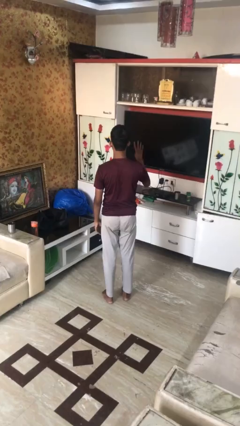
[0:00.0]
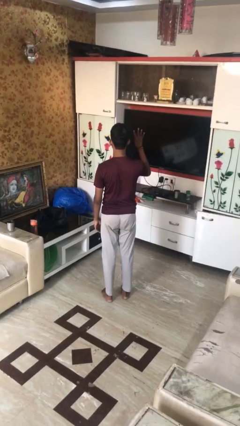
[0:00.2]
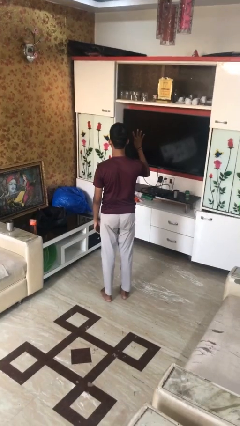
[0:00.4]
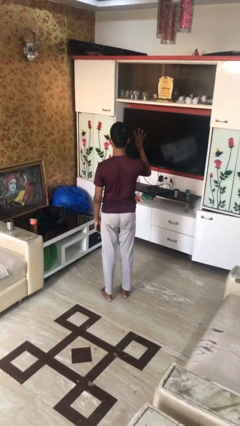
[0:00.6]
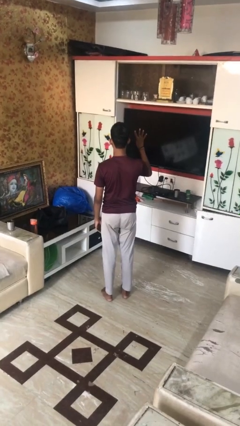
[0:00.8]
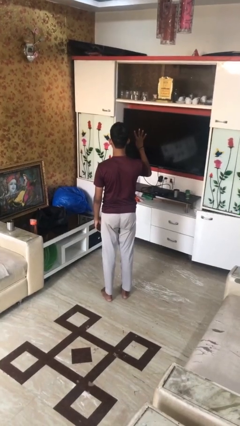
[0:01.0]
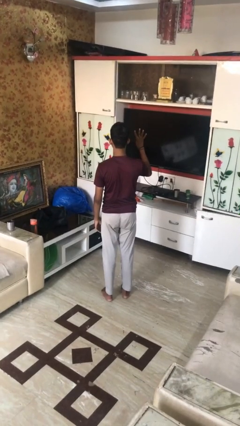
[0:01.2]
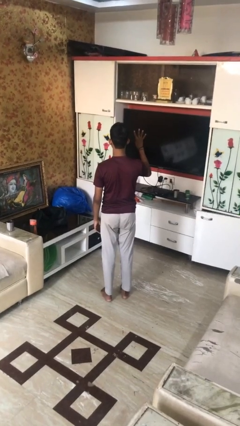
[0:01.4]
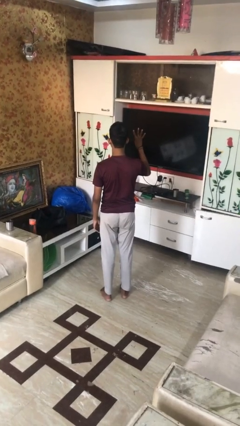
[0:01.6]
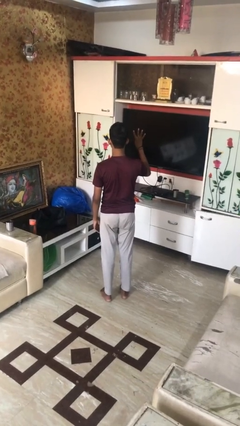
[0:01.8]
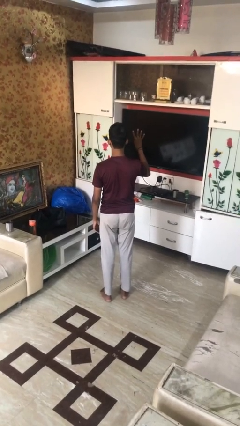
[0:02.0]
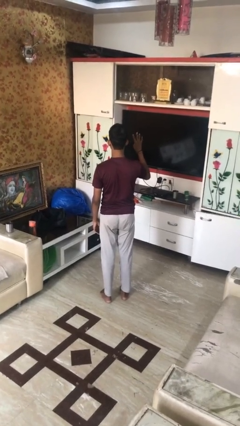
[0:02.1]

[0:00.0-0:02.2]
person gestures number four

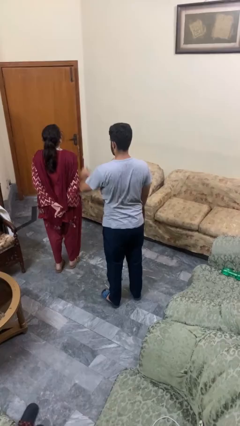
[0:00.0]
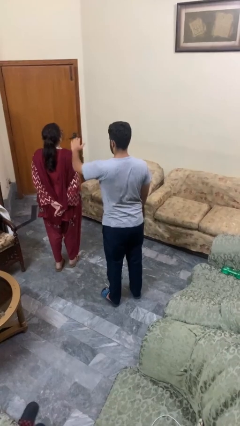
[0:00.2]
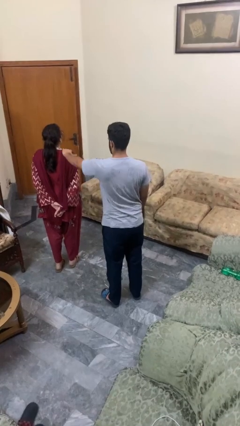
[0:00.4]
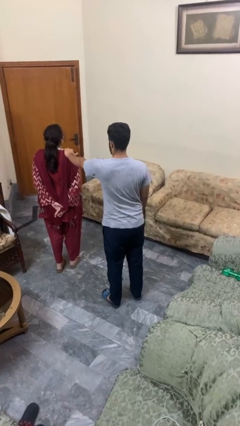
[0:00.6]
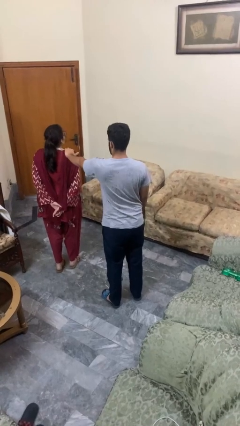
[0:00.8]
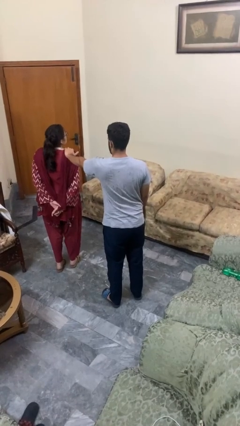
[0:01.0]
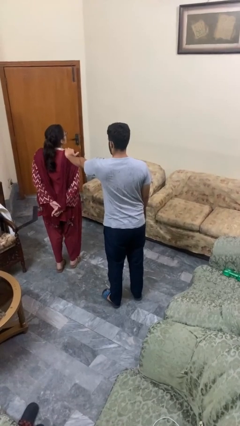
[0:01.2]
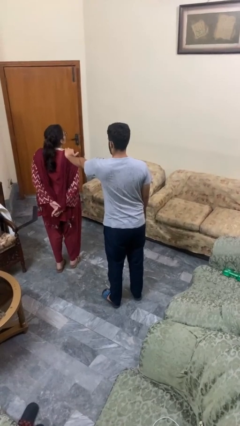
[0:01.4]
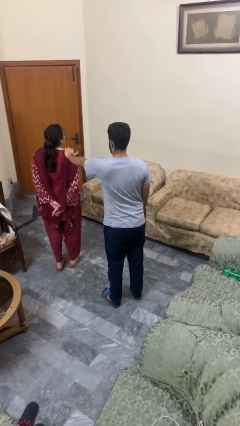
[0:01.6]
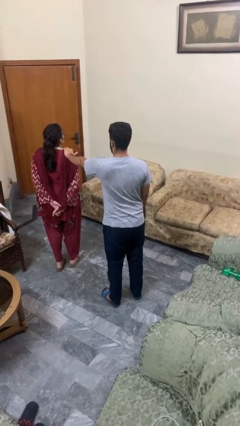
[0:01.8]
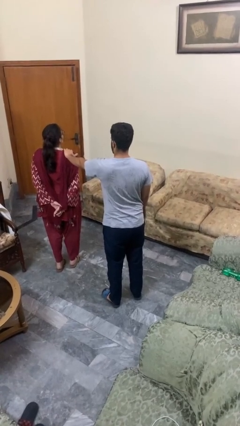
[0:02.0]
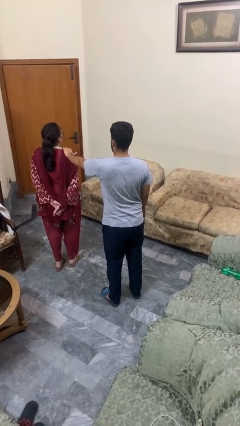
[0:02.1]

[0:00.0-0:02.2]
person pounds shoulders of person

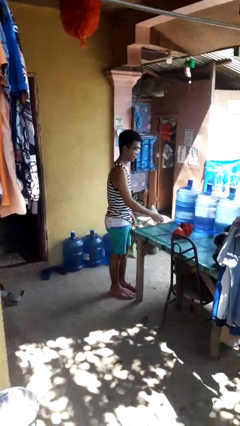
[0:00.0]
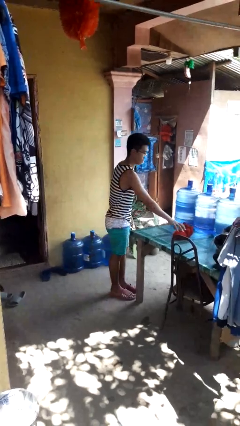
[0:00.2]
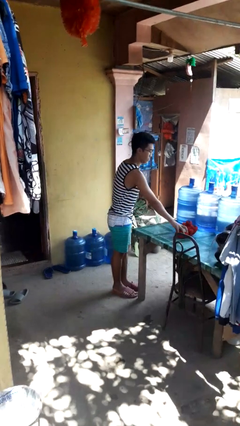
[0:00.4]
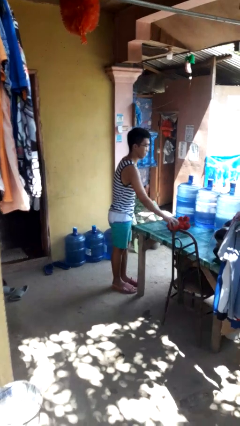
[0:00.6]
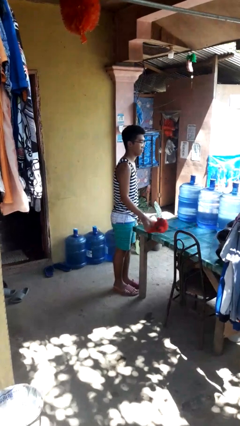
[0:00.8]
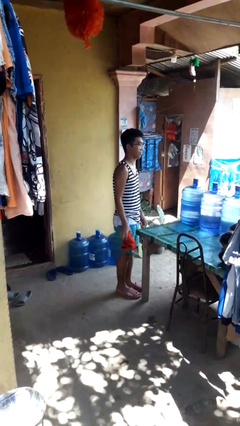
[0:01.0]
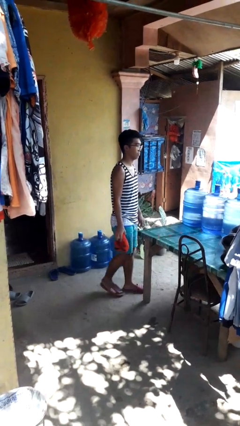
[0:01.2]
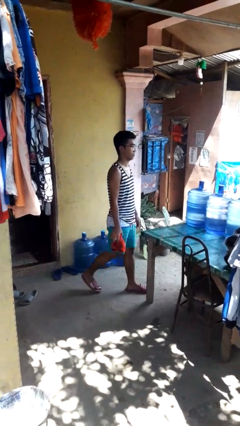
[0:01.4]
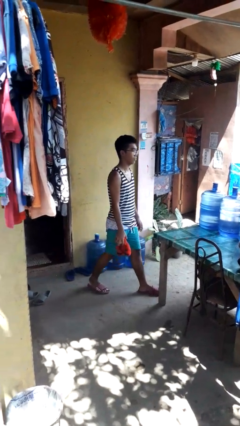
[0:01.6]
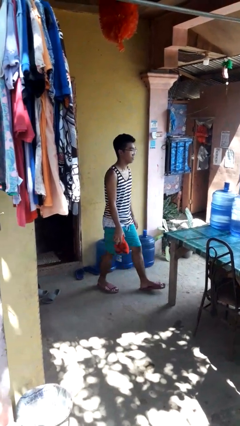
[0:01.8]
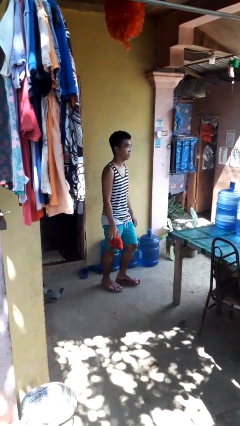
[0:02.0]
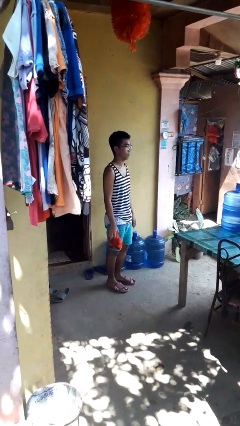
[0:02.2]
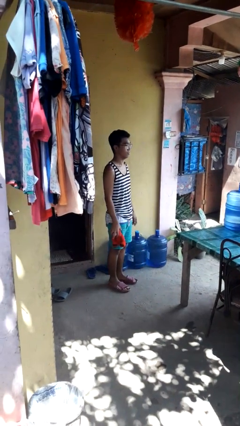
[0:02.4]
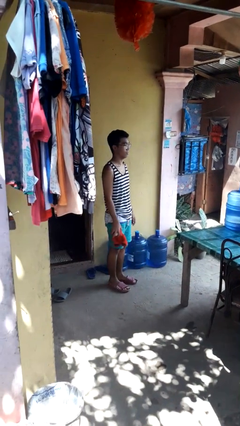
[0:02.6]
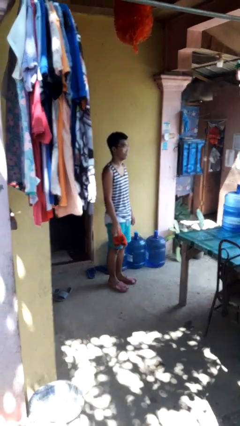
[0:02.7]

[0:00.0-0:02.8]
person picks up object from table

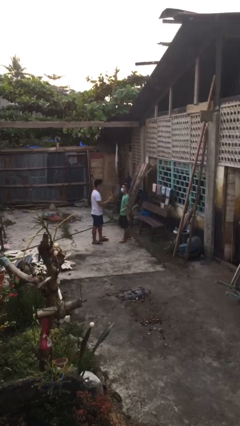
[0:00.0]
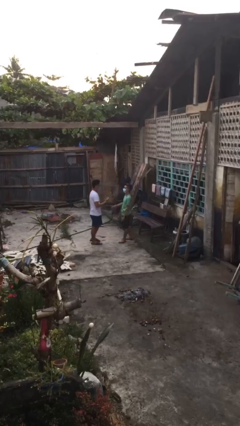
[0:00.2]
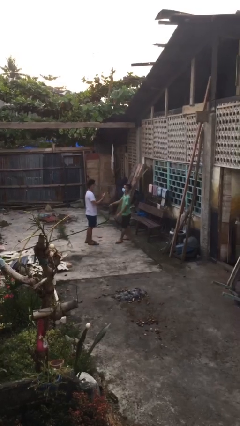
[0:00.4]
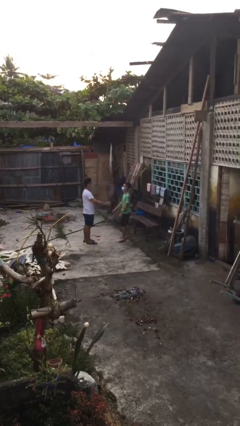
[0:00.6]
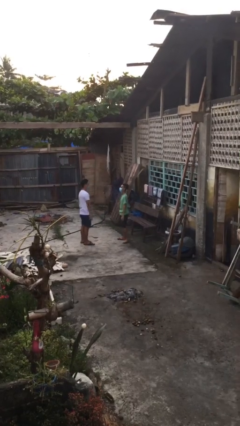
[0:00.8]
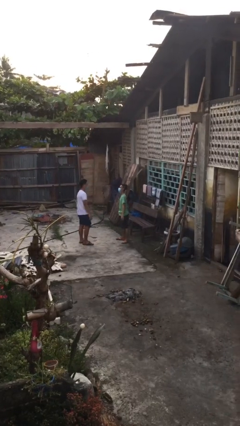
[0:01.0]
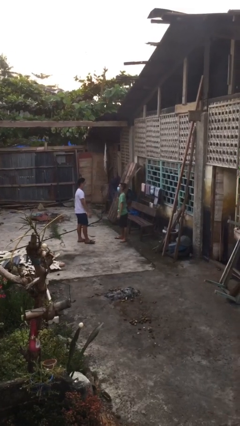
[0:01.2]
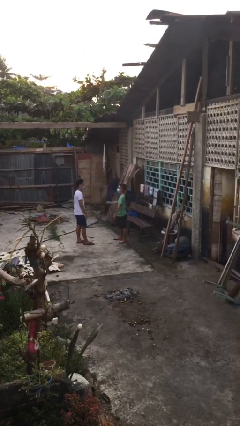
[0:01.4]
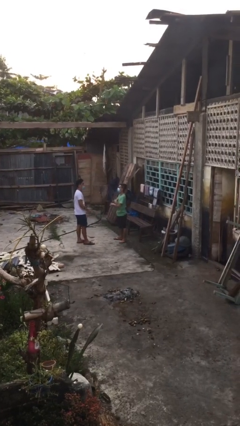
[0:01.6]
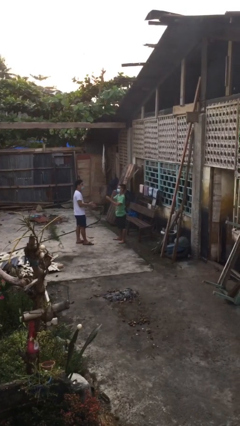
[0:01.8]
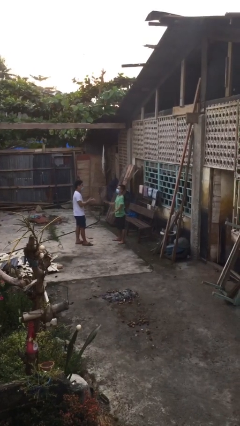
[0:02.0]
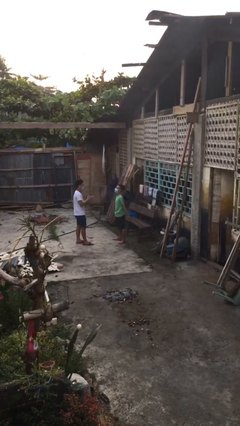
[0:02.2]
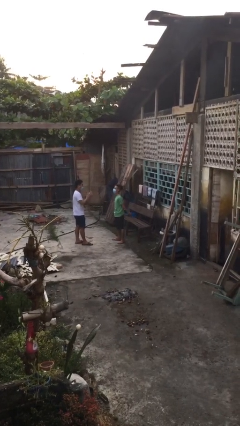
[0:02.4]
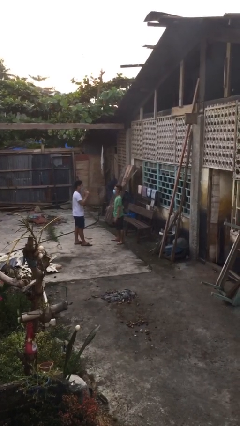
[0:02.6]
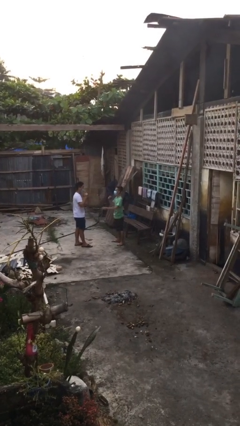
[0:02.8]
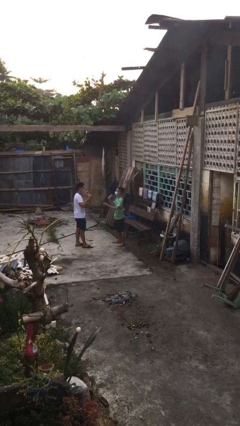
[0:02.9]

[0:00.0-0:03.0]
person talks to person

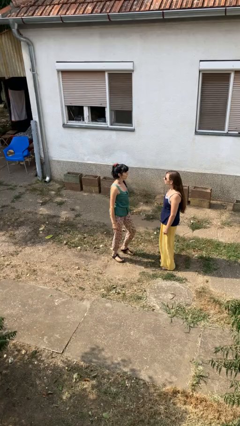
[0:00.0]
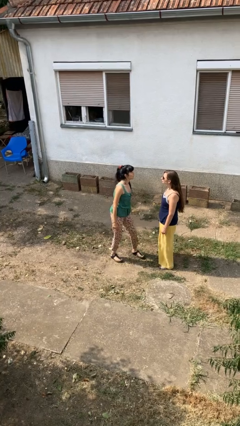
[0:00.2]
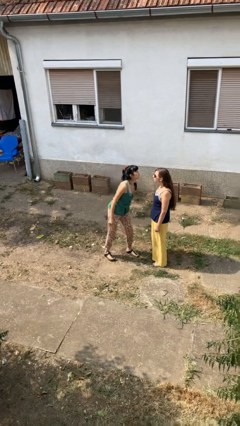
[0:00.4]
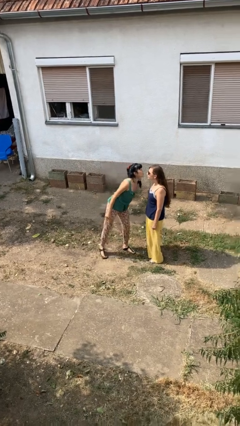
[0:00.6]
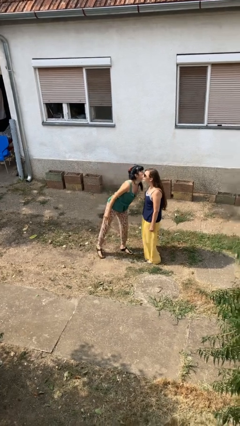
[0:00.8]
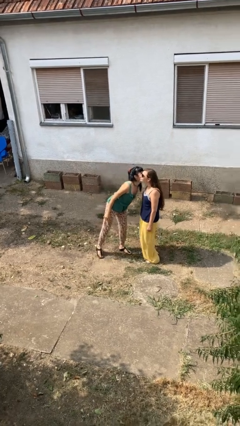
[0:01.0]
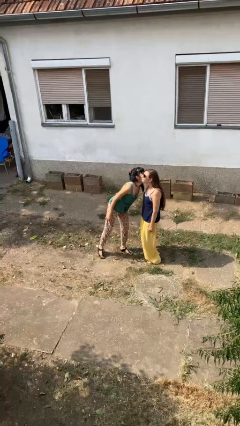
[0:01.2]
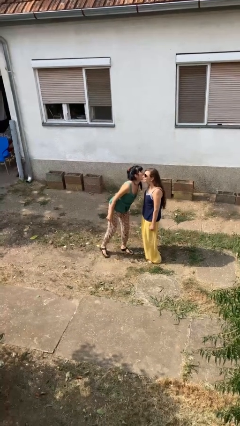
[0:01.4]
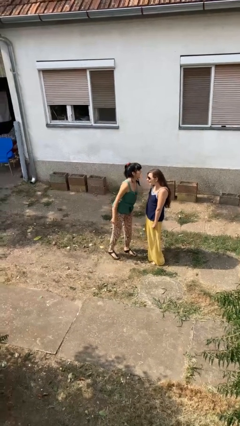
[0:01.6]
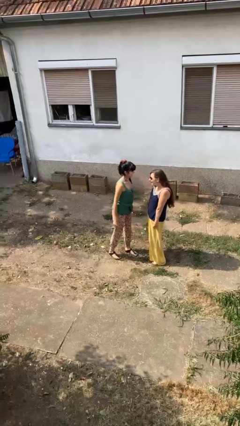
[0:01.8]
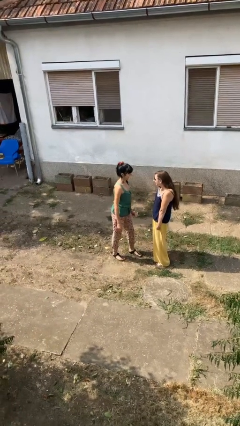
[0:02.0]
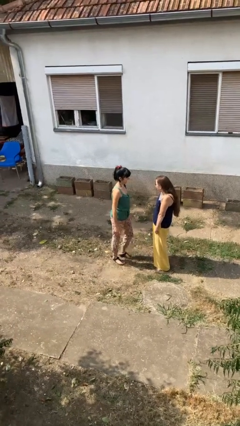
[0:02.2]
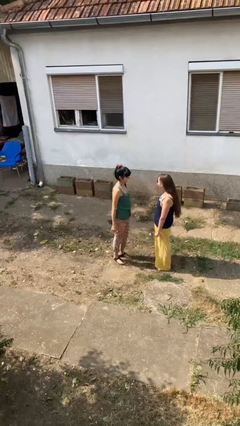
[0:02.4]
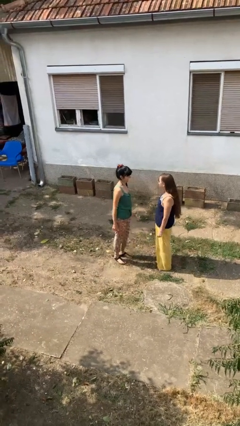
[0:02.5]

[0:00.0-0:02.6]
person kisses cheek of person

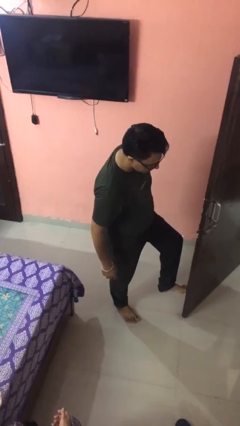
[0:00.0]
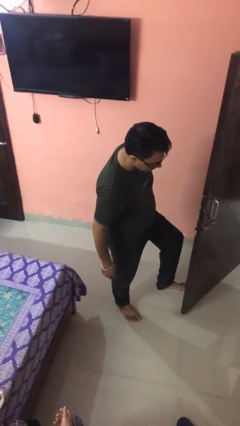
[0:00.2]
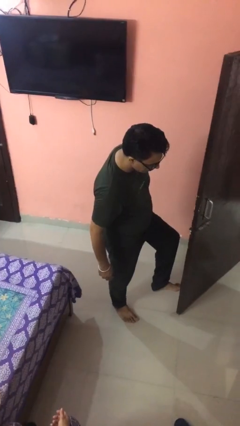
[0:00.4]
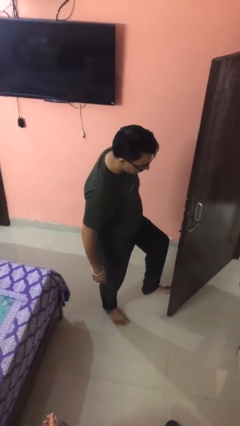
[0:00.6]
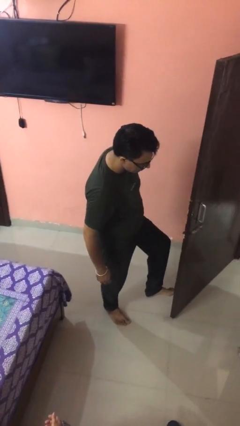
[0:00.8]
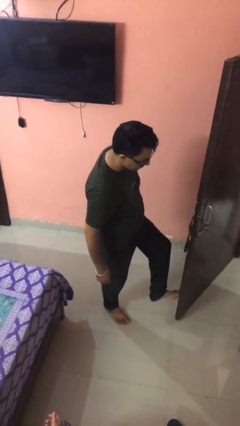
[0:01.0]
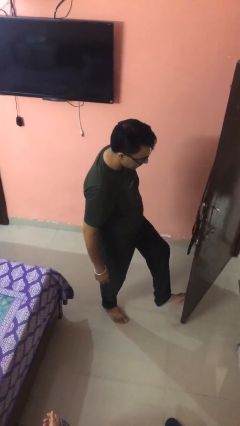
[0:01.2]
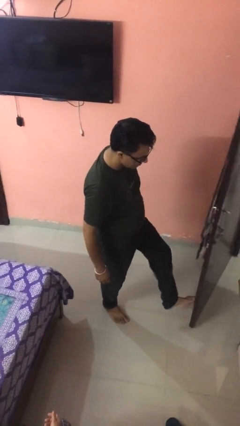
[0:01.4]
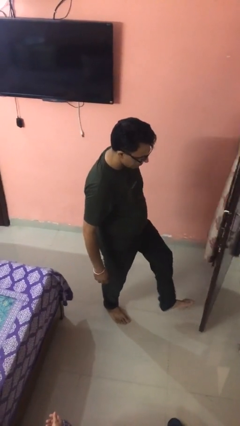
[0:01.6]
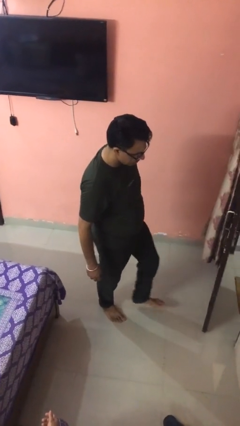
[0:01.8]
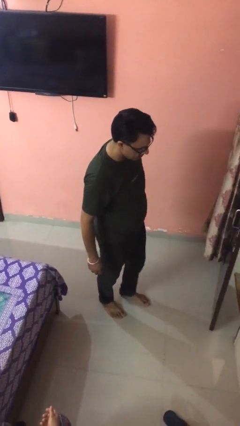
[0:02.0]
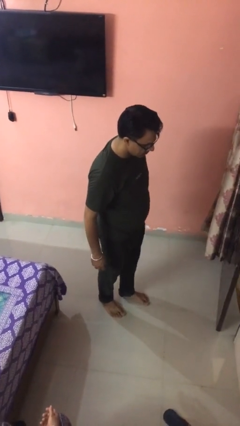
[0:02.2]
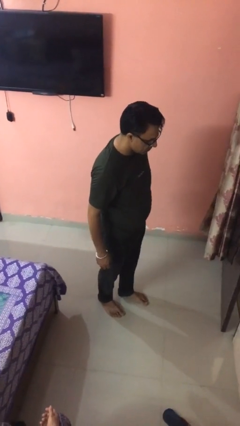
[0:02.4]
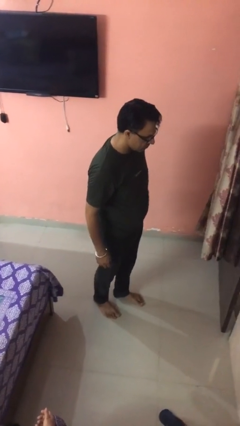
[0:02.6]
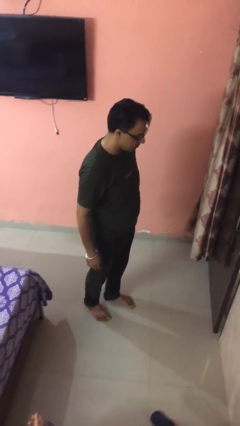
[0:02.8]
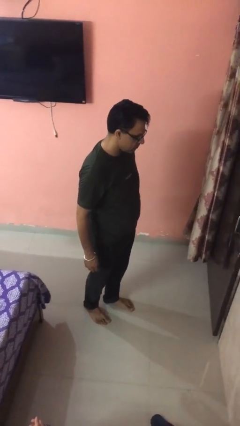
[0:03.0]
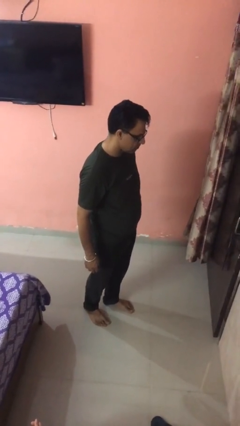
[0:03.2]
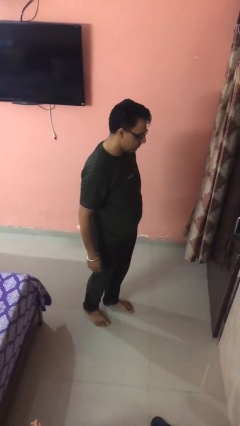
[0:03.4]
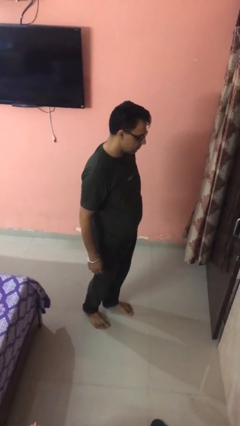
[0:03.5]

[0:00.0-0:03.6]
person closes door with foot

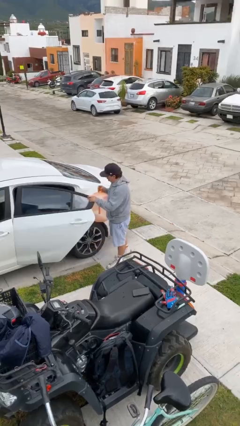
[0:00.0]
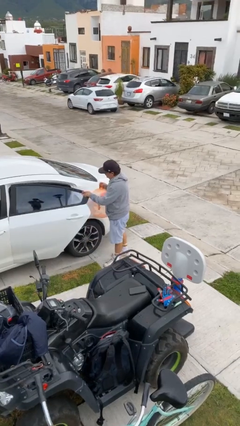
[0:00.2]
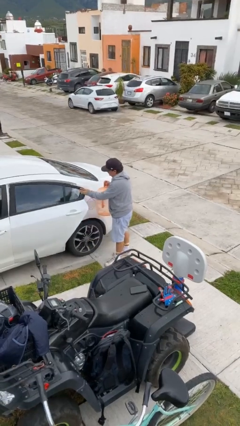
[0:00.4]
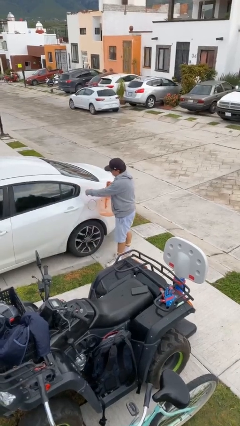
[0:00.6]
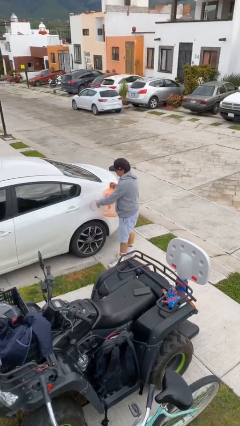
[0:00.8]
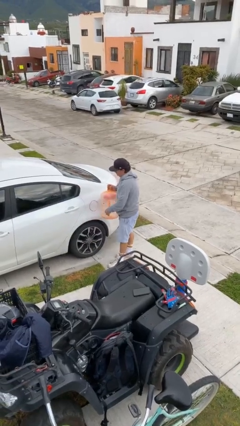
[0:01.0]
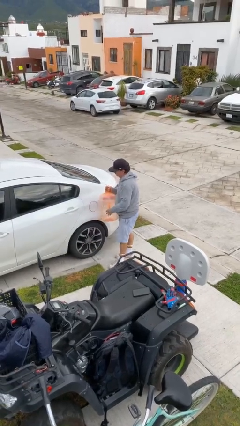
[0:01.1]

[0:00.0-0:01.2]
person closes car door
